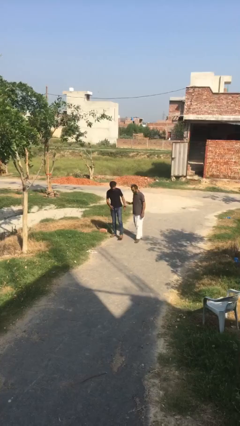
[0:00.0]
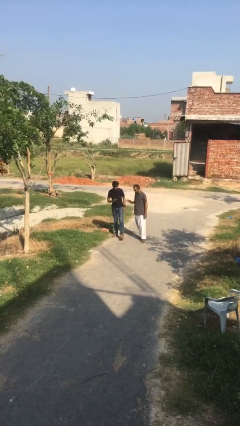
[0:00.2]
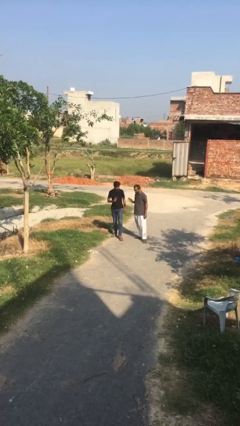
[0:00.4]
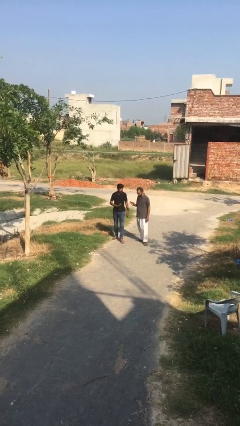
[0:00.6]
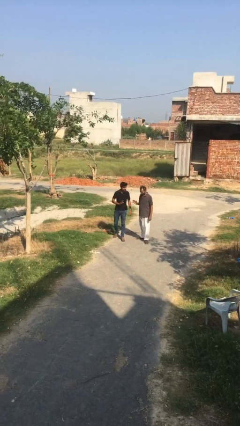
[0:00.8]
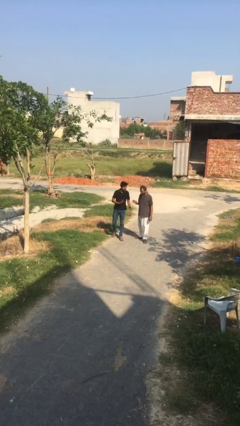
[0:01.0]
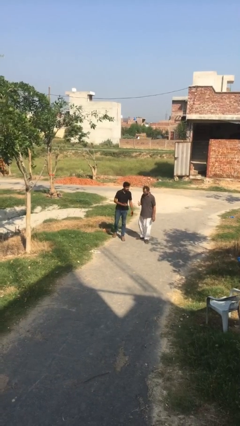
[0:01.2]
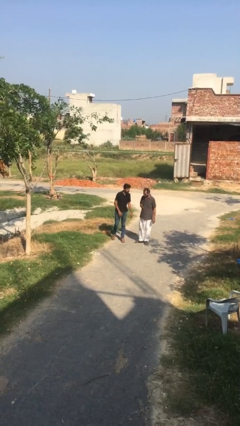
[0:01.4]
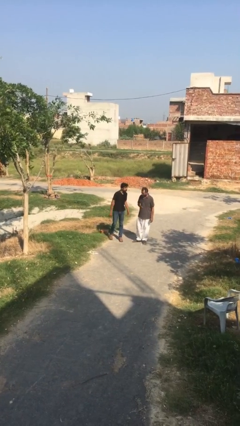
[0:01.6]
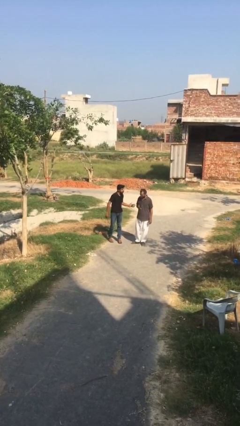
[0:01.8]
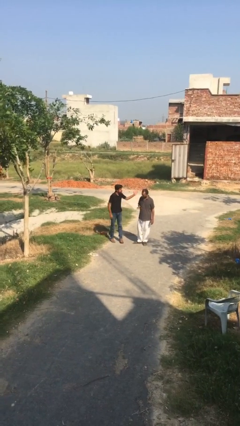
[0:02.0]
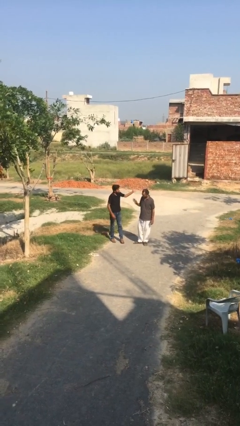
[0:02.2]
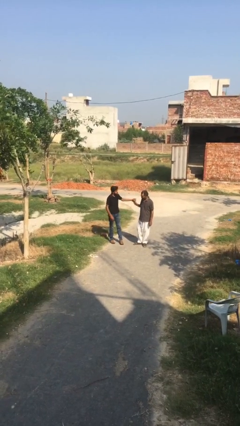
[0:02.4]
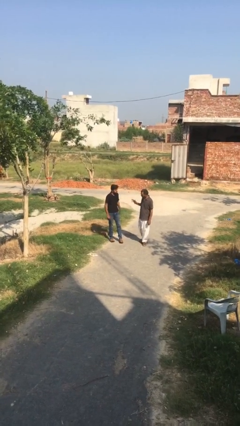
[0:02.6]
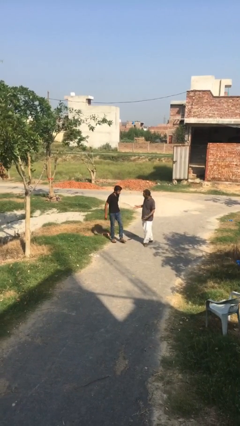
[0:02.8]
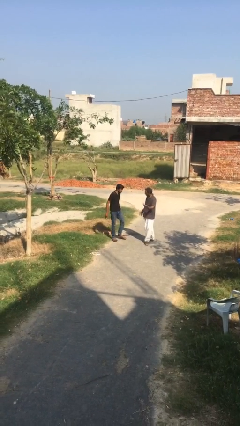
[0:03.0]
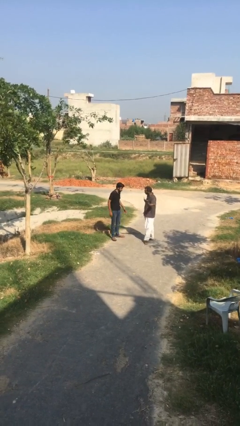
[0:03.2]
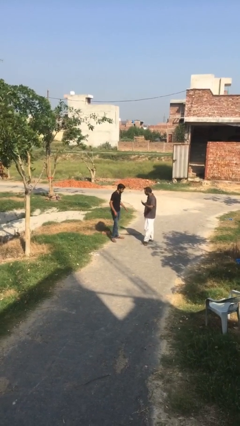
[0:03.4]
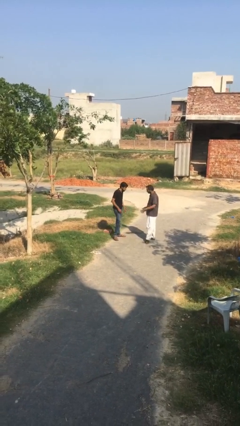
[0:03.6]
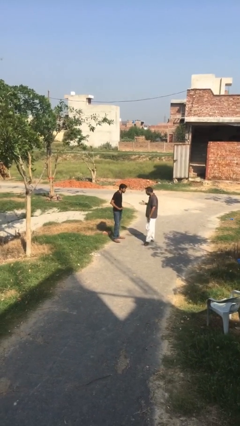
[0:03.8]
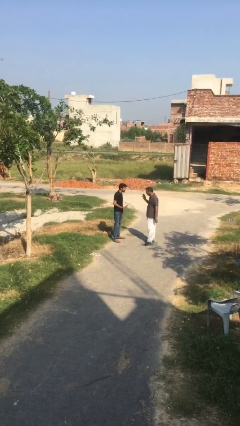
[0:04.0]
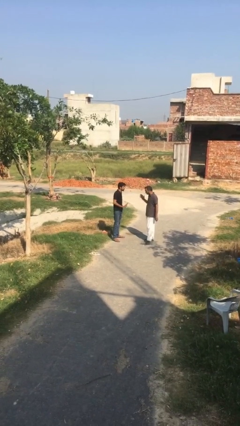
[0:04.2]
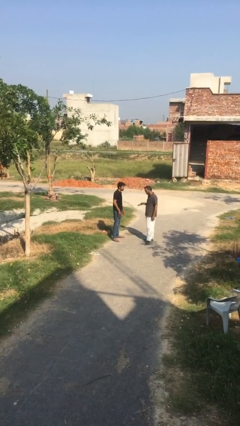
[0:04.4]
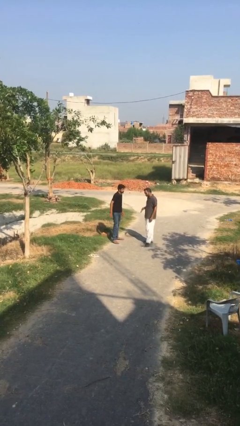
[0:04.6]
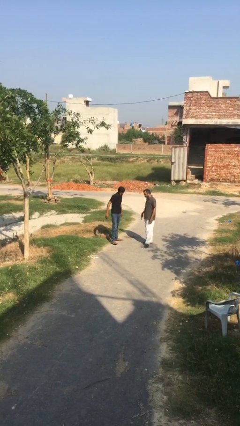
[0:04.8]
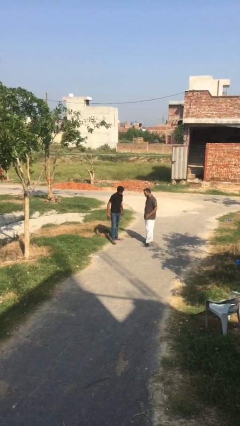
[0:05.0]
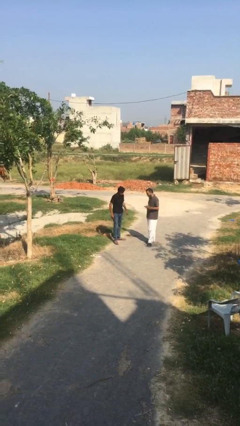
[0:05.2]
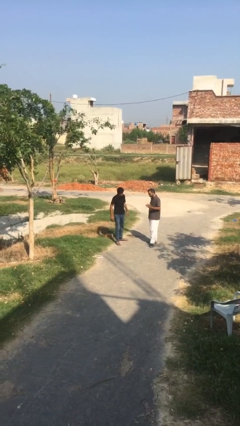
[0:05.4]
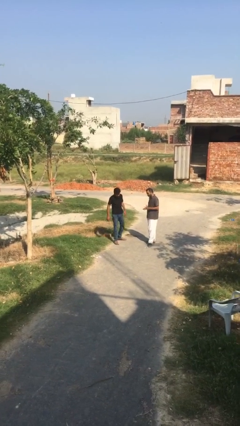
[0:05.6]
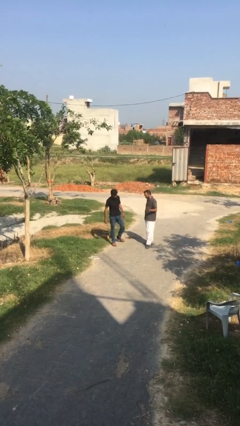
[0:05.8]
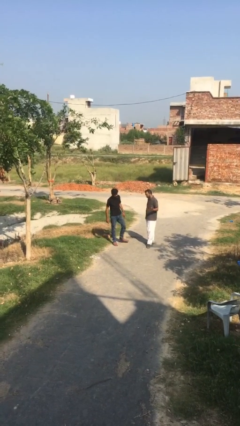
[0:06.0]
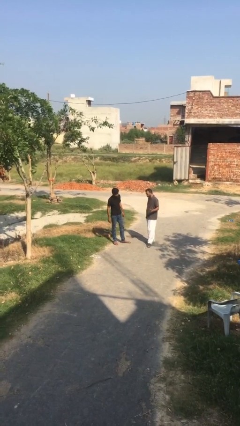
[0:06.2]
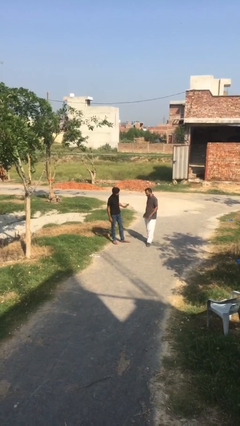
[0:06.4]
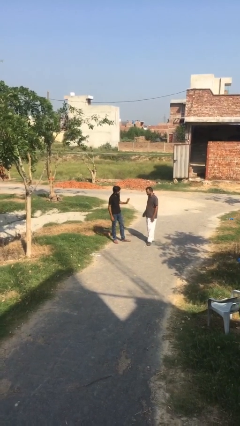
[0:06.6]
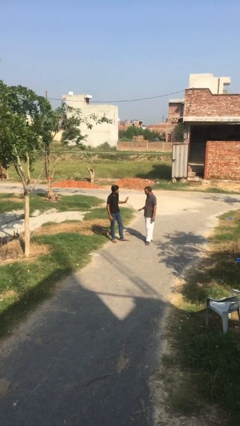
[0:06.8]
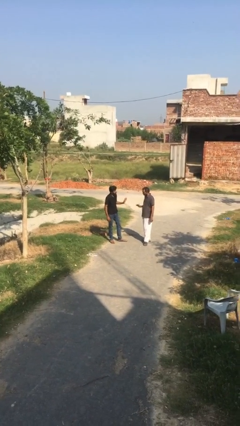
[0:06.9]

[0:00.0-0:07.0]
person talks to person

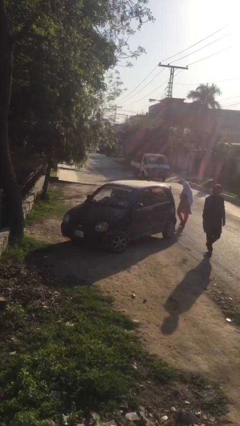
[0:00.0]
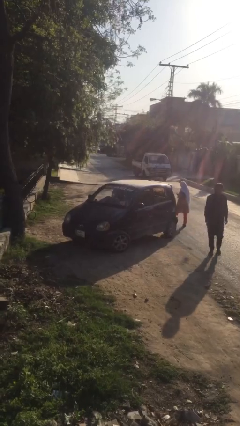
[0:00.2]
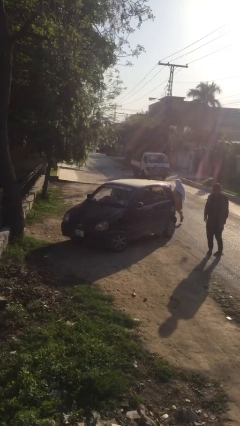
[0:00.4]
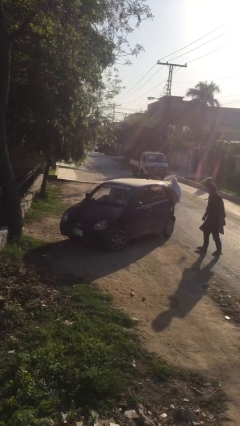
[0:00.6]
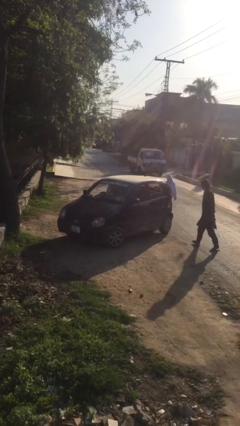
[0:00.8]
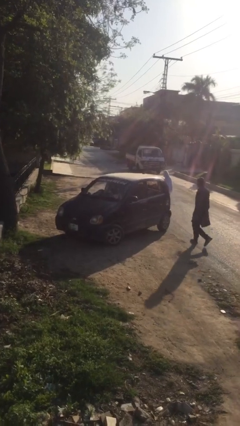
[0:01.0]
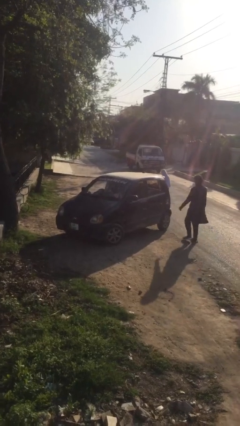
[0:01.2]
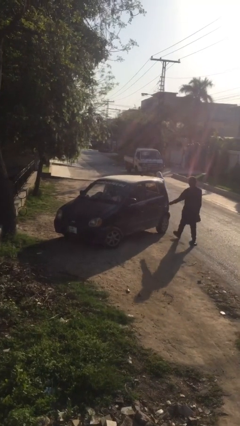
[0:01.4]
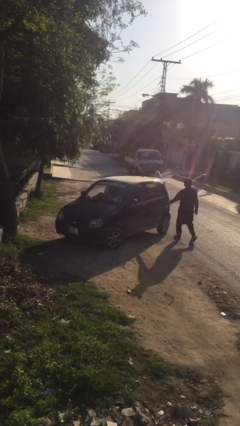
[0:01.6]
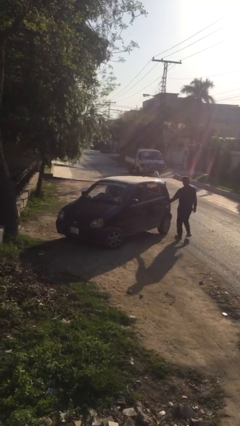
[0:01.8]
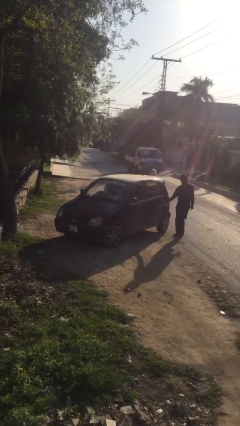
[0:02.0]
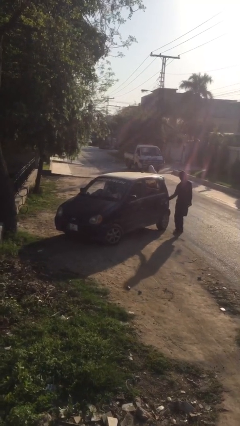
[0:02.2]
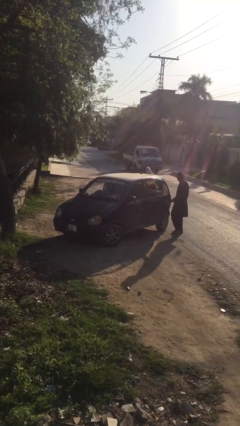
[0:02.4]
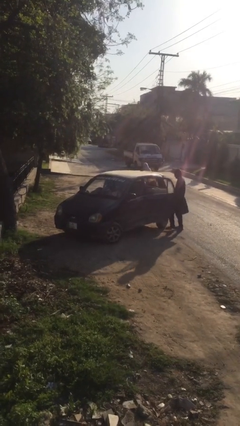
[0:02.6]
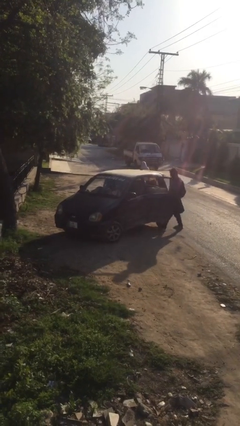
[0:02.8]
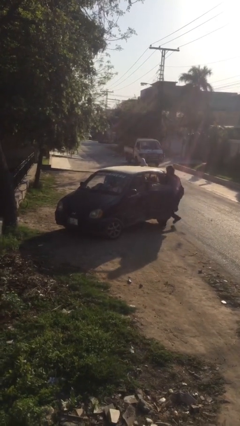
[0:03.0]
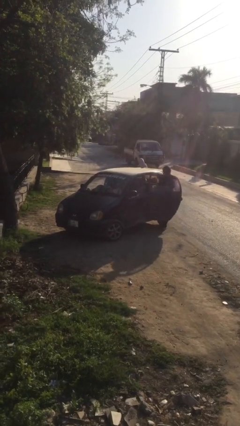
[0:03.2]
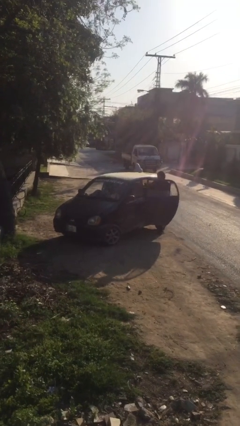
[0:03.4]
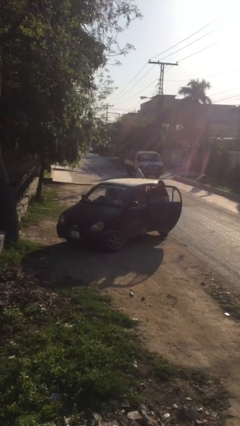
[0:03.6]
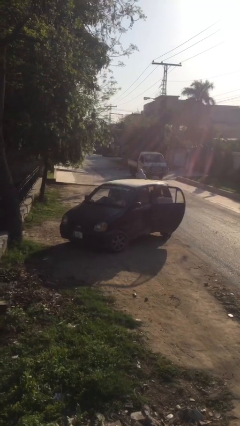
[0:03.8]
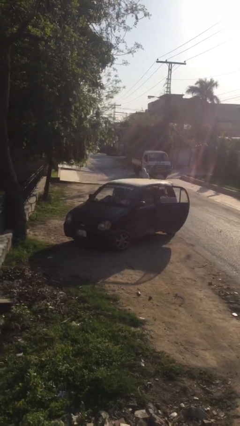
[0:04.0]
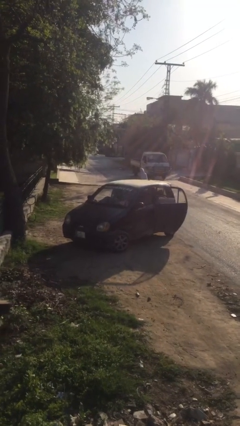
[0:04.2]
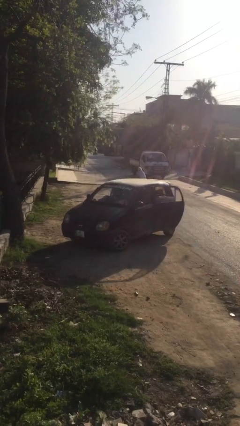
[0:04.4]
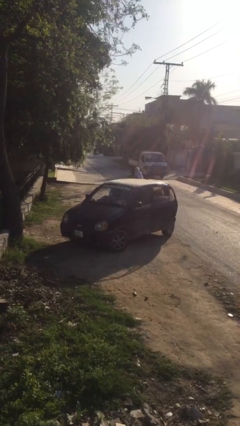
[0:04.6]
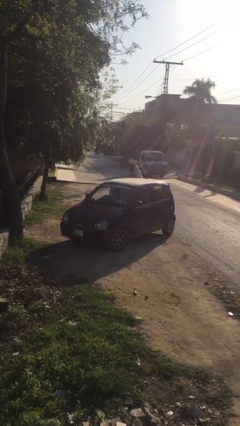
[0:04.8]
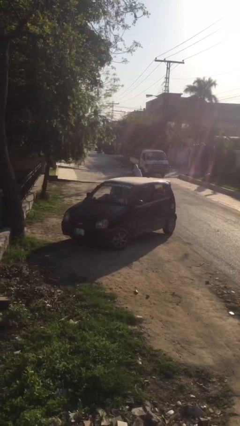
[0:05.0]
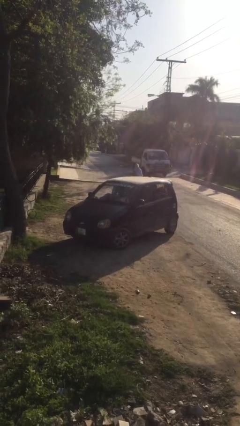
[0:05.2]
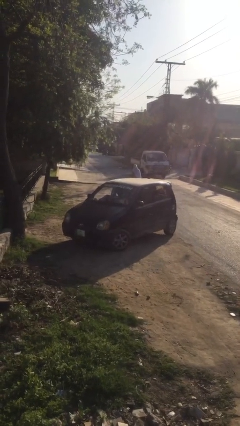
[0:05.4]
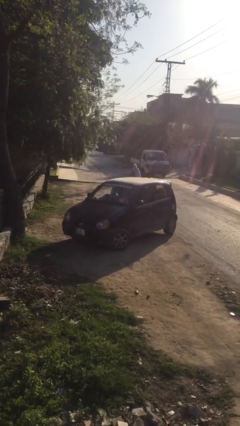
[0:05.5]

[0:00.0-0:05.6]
car picks up person

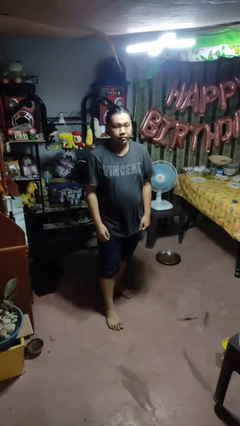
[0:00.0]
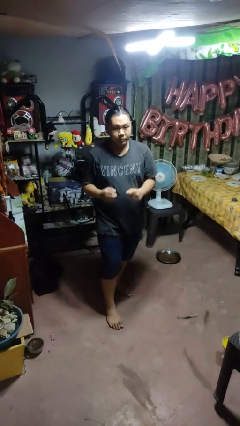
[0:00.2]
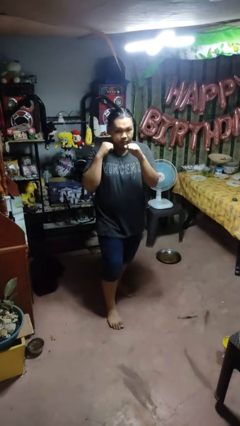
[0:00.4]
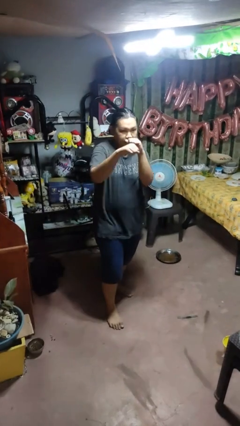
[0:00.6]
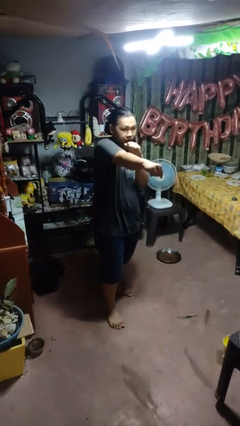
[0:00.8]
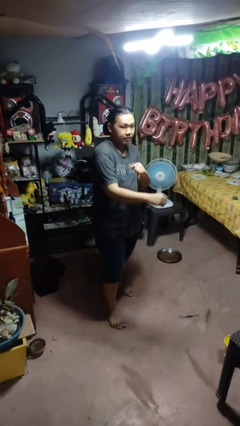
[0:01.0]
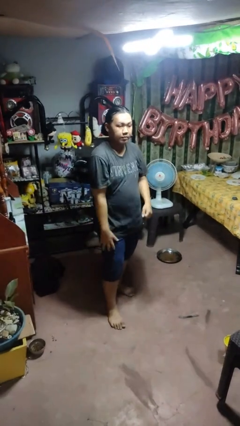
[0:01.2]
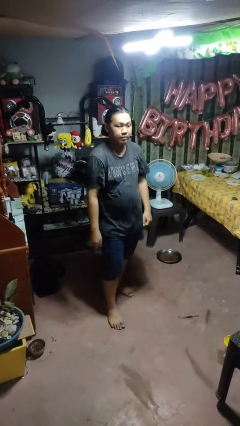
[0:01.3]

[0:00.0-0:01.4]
person punches

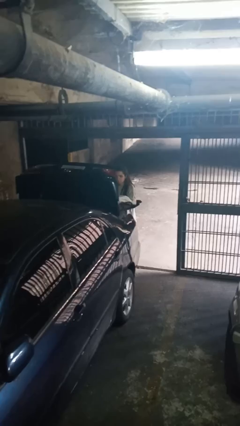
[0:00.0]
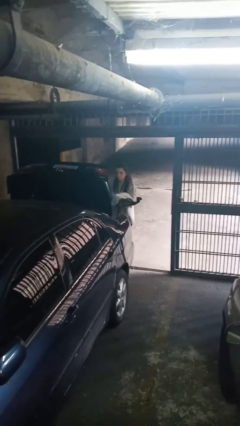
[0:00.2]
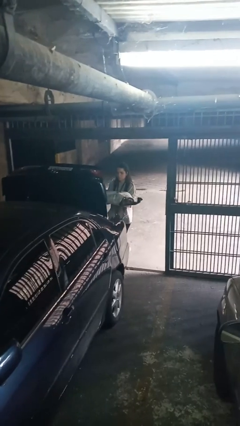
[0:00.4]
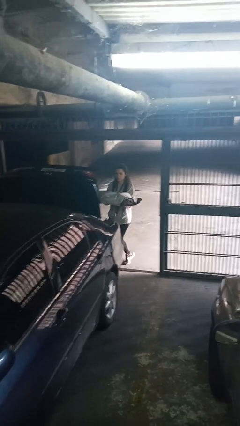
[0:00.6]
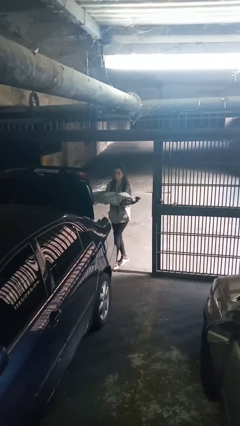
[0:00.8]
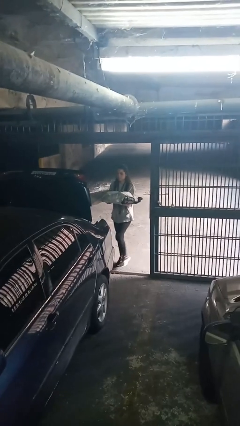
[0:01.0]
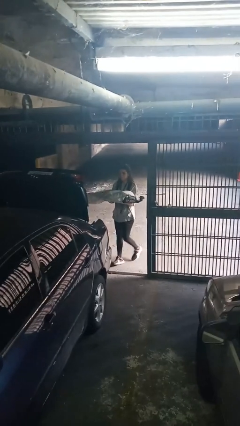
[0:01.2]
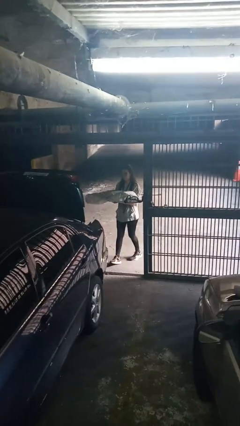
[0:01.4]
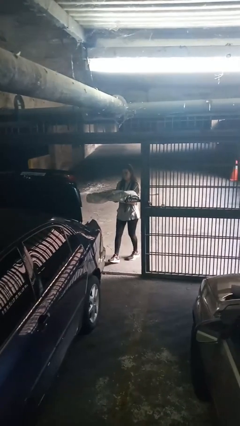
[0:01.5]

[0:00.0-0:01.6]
person unloads car

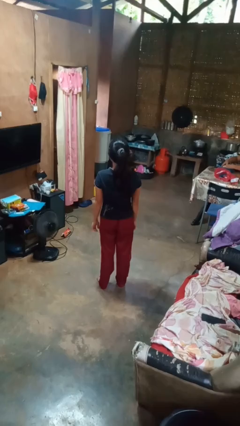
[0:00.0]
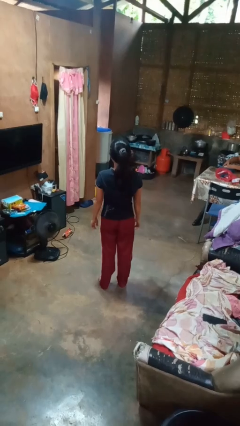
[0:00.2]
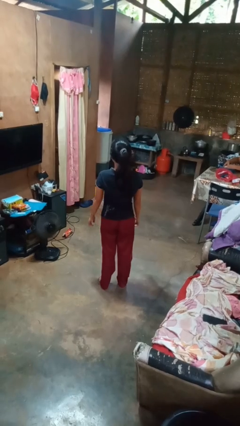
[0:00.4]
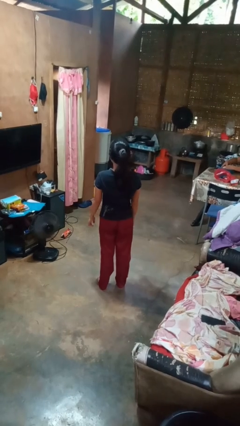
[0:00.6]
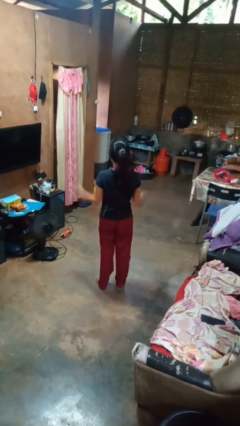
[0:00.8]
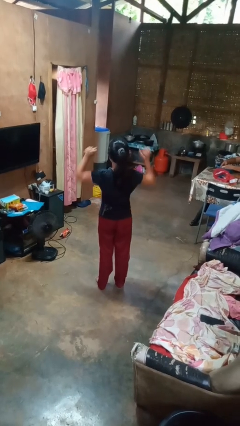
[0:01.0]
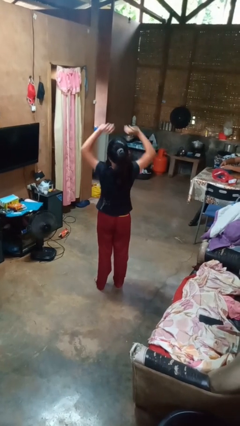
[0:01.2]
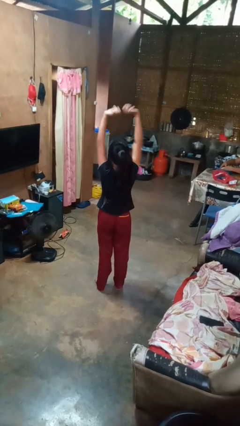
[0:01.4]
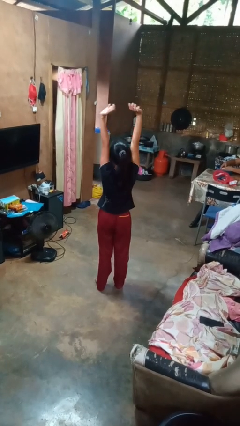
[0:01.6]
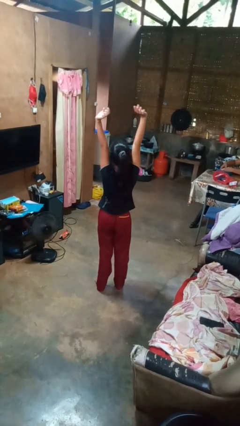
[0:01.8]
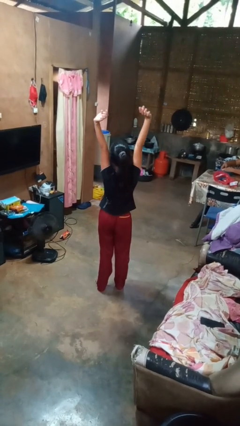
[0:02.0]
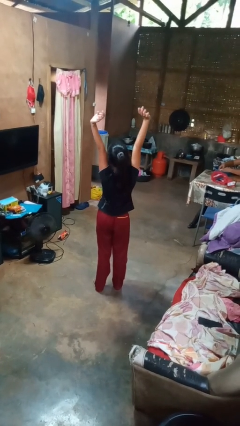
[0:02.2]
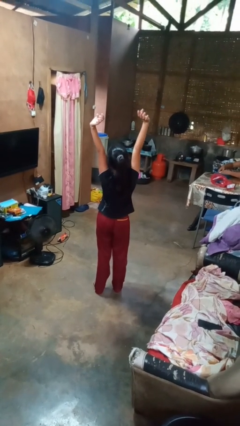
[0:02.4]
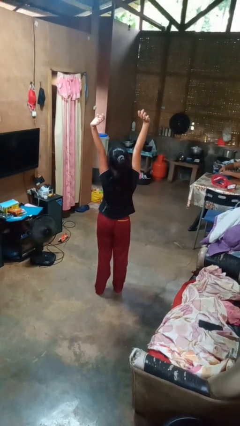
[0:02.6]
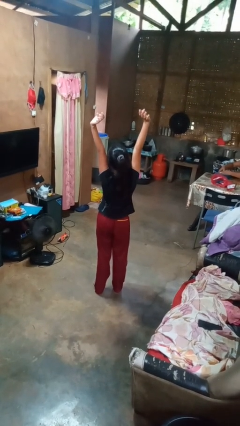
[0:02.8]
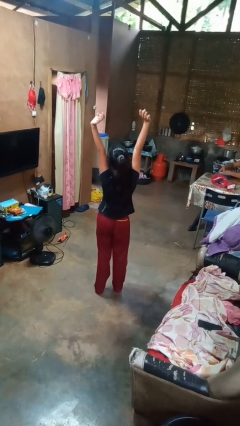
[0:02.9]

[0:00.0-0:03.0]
person stretches arms over head
